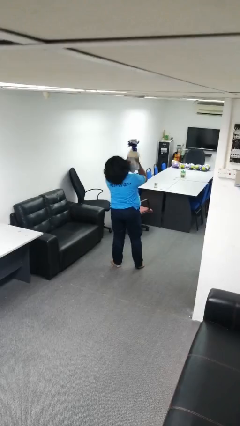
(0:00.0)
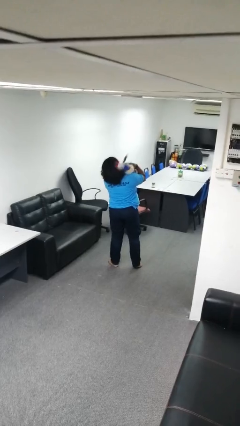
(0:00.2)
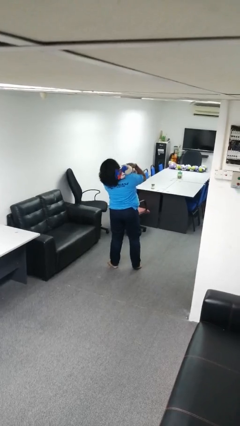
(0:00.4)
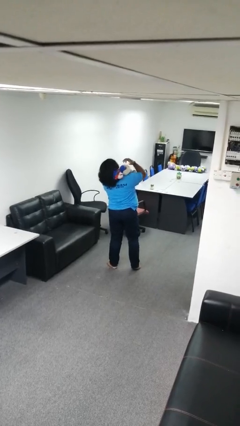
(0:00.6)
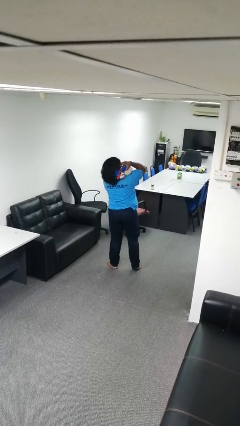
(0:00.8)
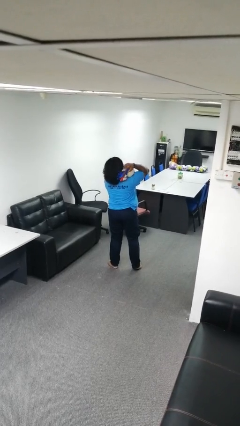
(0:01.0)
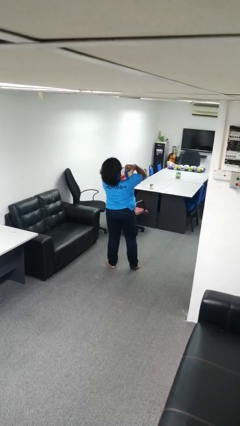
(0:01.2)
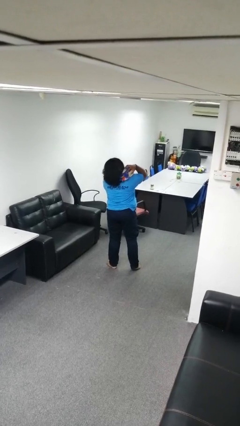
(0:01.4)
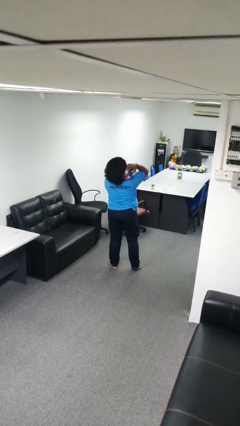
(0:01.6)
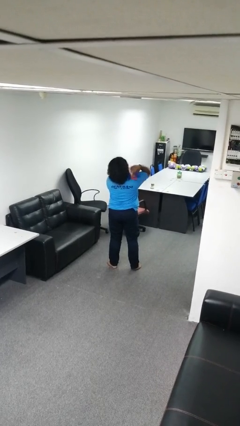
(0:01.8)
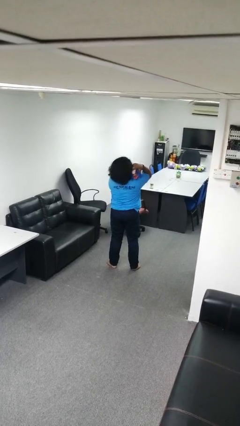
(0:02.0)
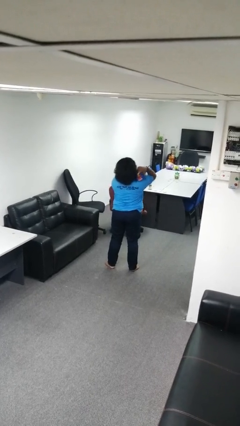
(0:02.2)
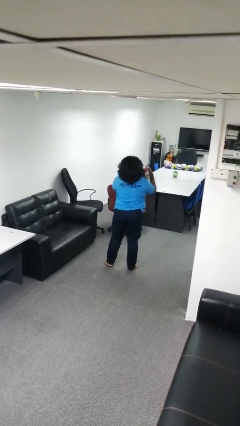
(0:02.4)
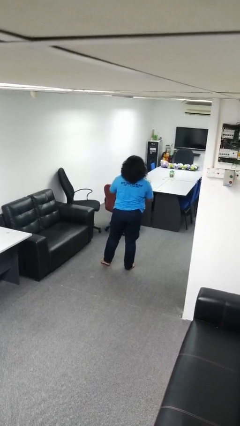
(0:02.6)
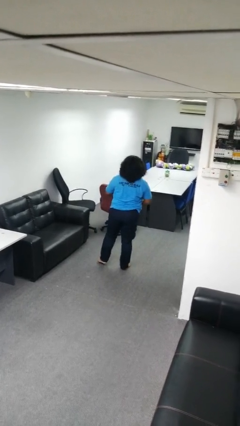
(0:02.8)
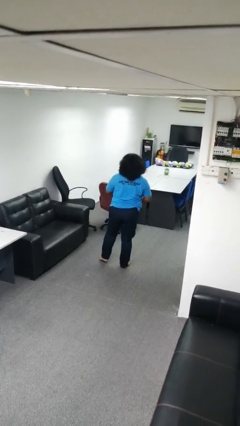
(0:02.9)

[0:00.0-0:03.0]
person hugs stuffed animal

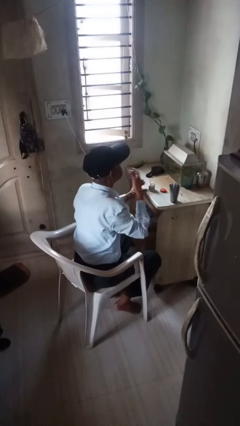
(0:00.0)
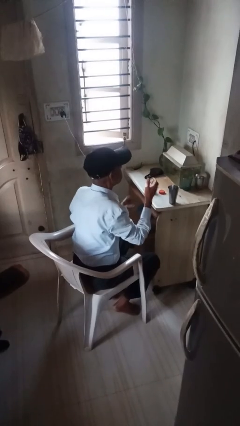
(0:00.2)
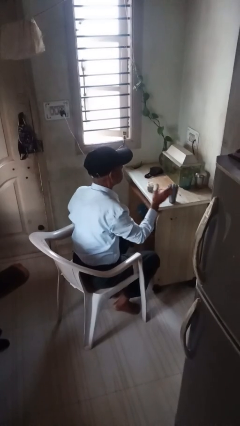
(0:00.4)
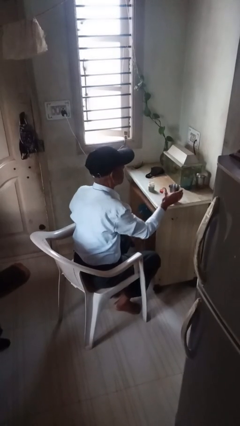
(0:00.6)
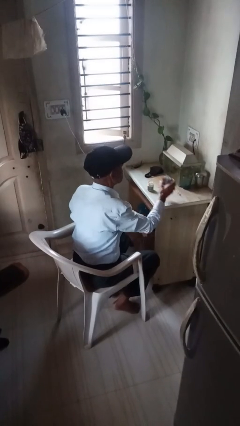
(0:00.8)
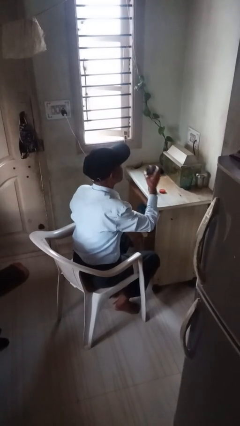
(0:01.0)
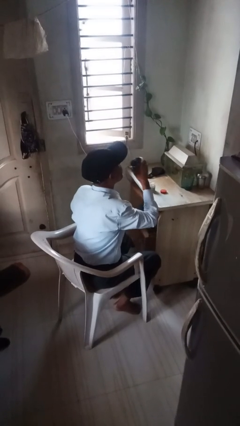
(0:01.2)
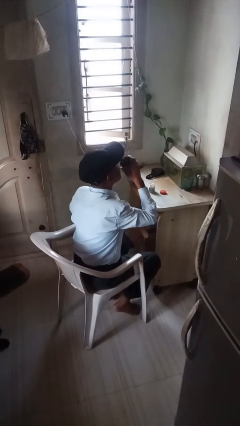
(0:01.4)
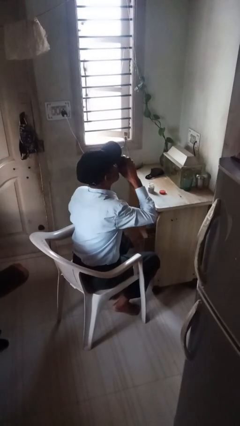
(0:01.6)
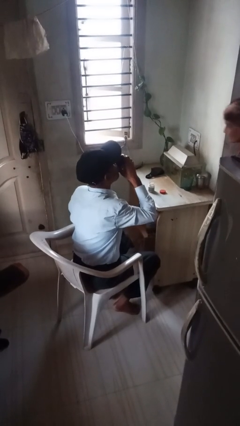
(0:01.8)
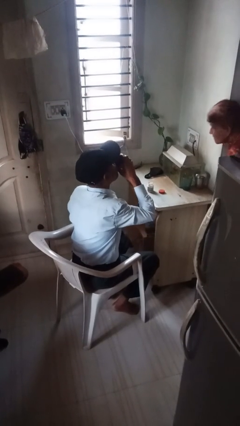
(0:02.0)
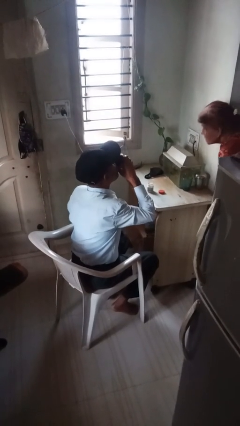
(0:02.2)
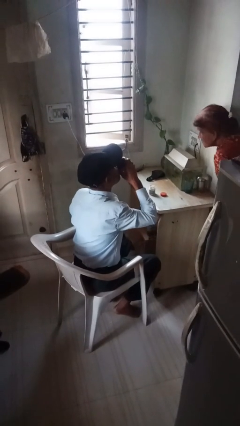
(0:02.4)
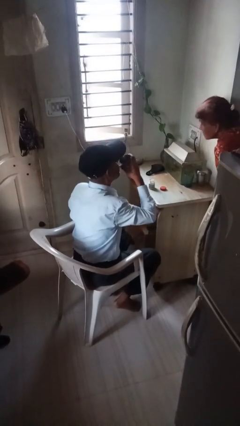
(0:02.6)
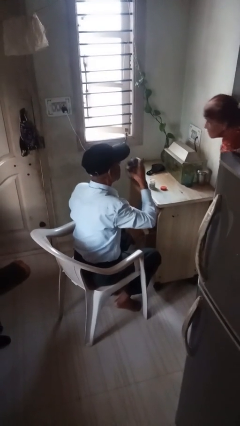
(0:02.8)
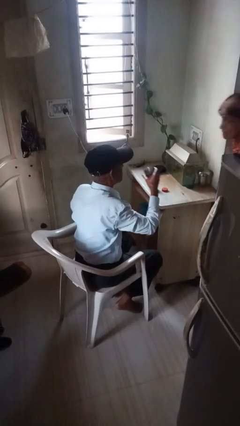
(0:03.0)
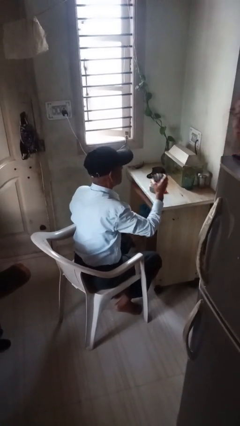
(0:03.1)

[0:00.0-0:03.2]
person drinks from cup

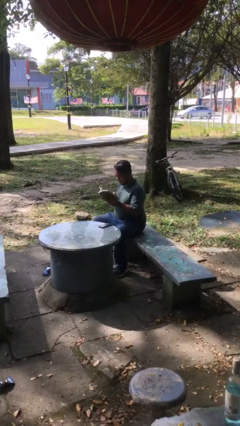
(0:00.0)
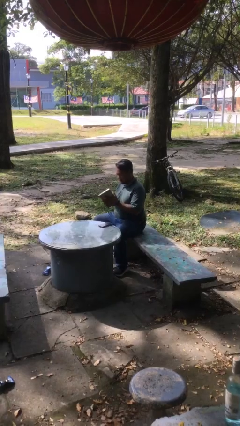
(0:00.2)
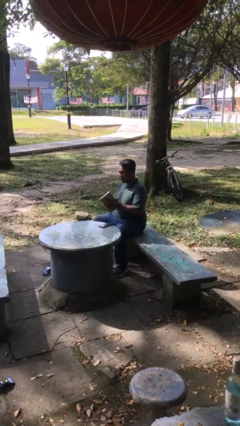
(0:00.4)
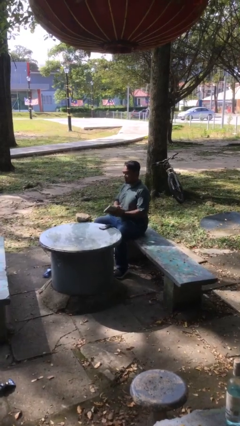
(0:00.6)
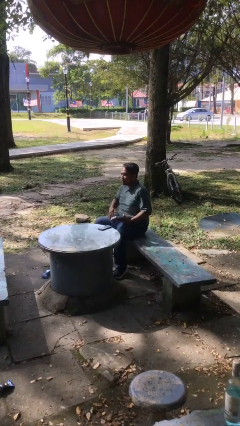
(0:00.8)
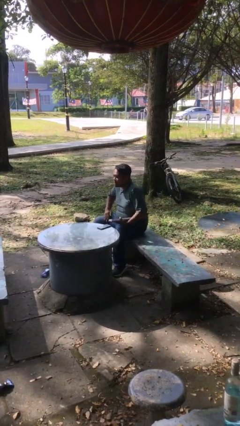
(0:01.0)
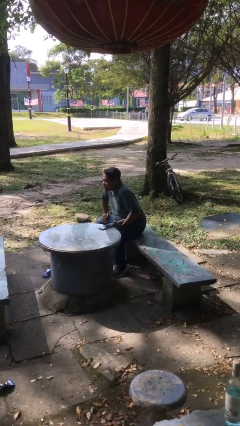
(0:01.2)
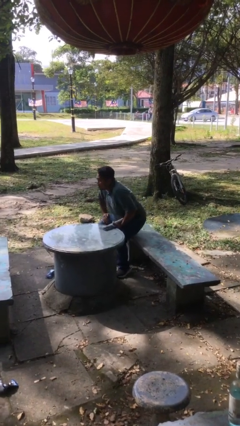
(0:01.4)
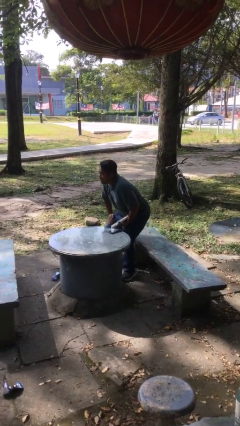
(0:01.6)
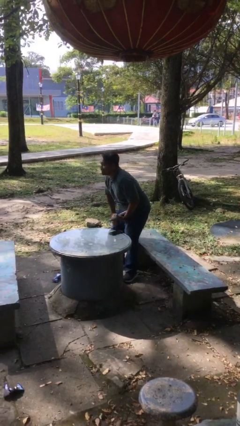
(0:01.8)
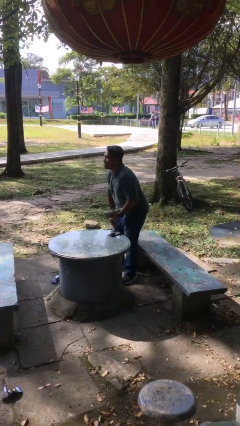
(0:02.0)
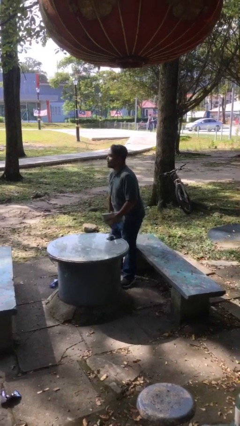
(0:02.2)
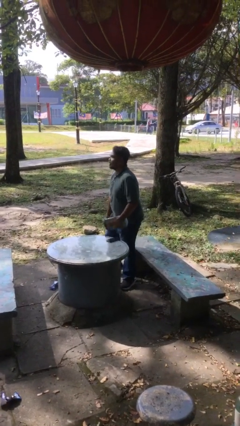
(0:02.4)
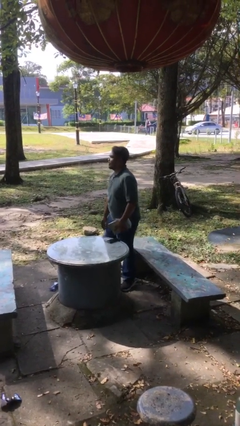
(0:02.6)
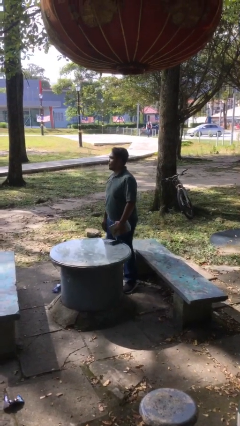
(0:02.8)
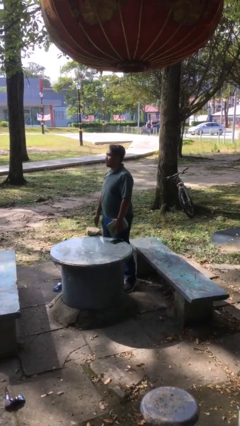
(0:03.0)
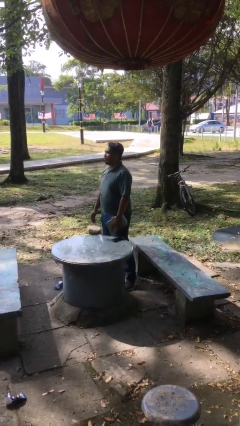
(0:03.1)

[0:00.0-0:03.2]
person stands up

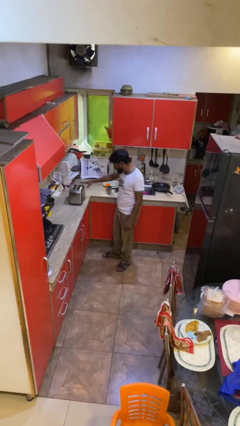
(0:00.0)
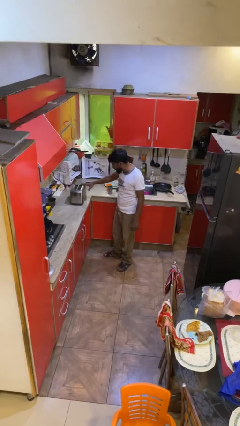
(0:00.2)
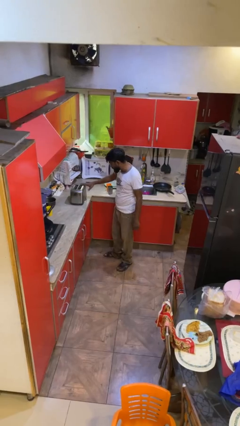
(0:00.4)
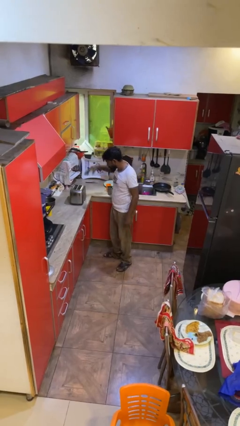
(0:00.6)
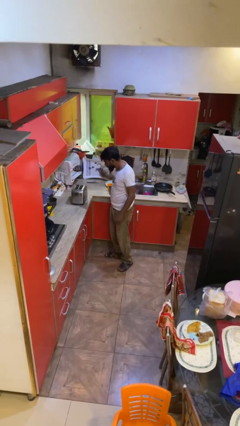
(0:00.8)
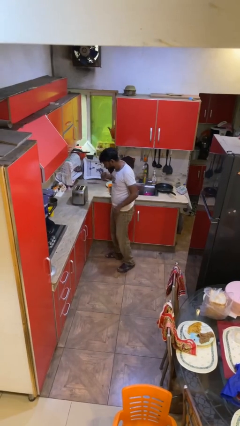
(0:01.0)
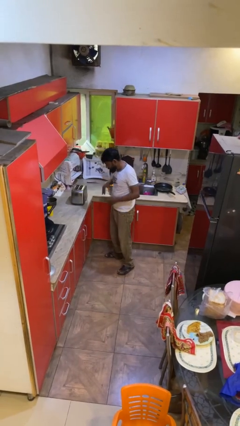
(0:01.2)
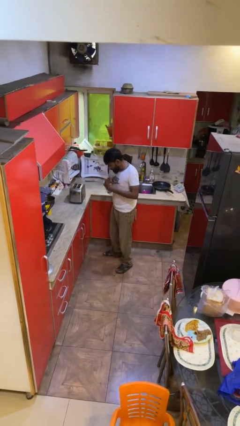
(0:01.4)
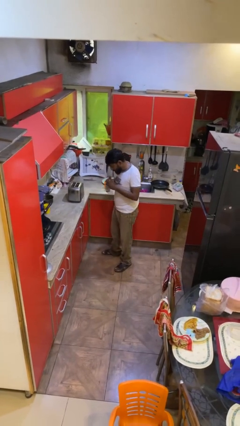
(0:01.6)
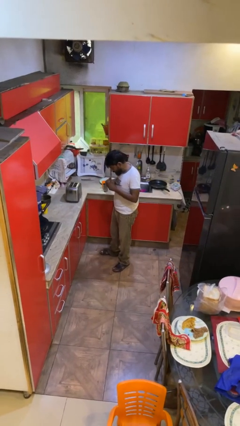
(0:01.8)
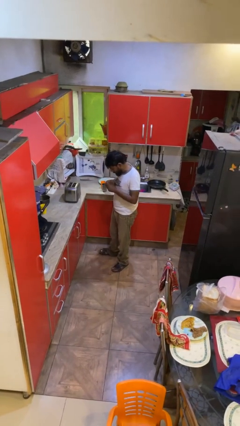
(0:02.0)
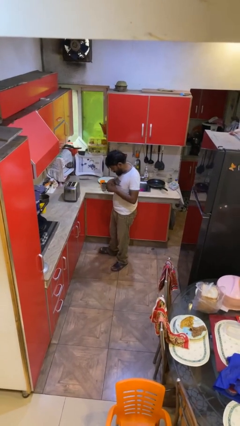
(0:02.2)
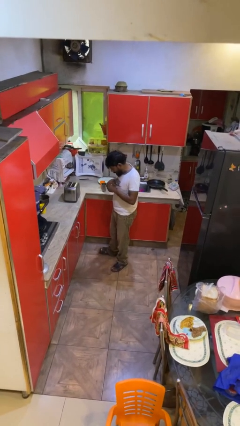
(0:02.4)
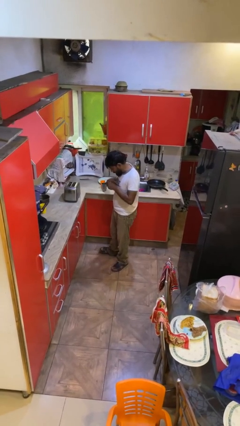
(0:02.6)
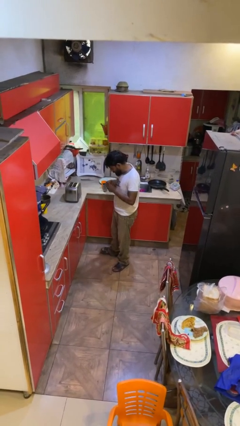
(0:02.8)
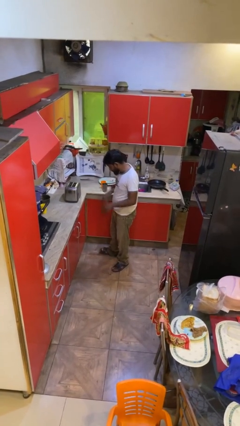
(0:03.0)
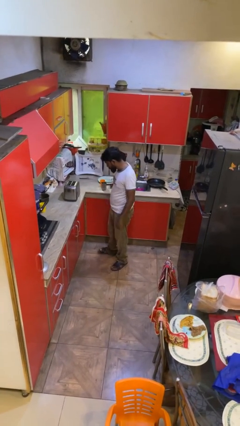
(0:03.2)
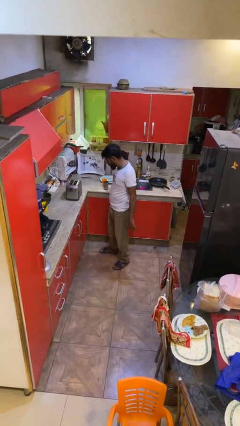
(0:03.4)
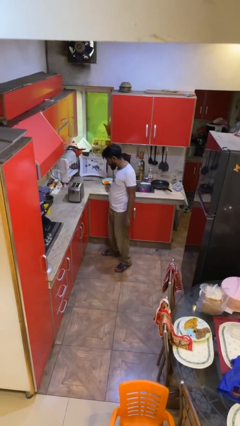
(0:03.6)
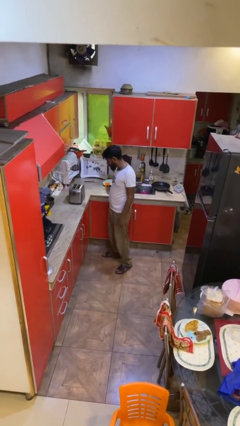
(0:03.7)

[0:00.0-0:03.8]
person burns hand

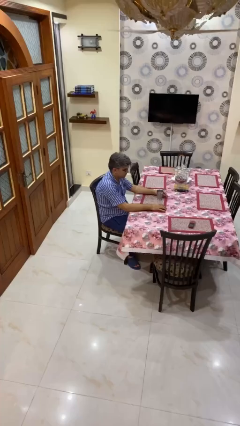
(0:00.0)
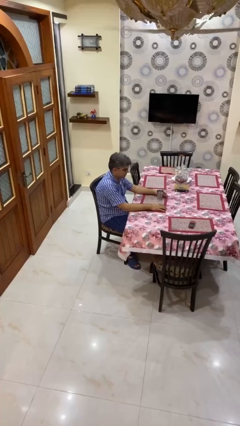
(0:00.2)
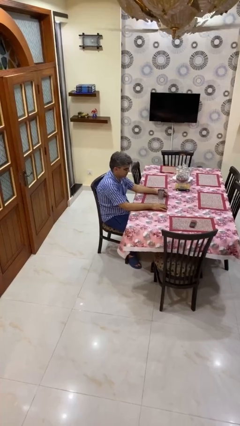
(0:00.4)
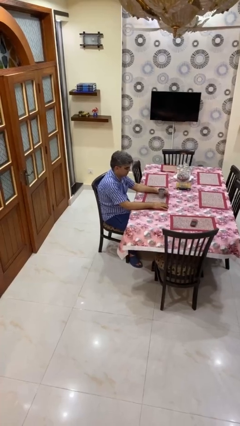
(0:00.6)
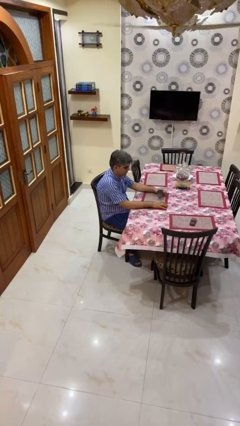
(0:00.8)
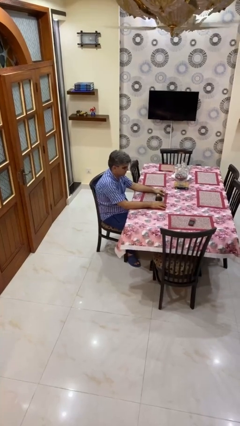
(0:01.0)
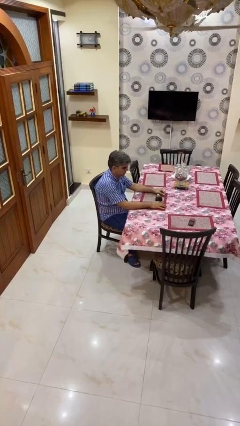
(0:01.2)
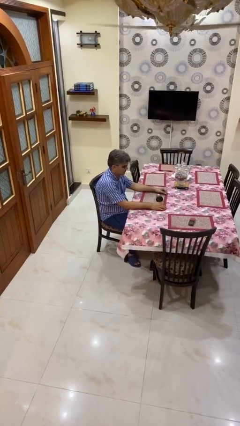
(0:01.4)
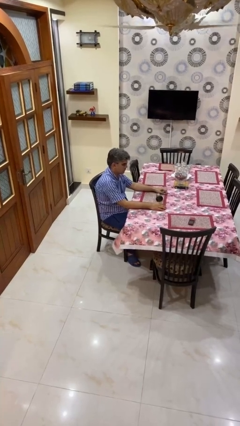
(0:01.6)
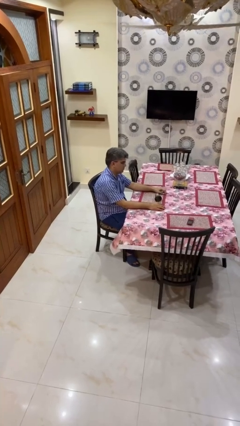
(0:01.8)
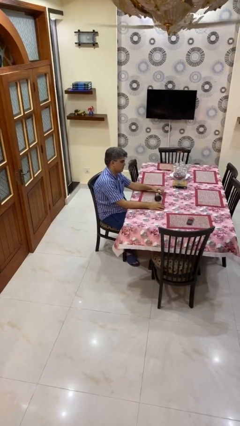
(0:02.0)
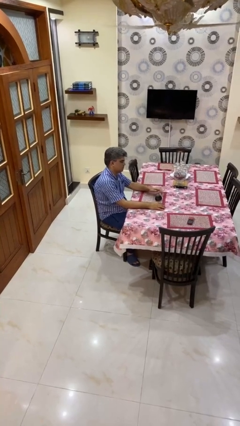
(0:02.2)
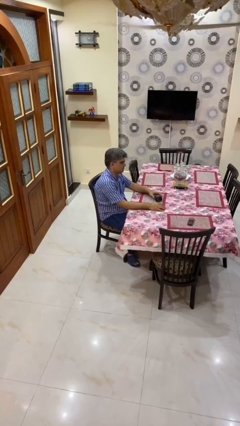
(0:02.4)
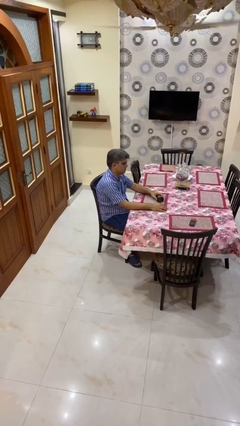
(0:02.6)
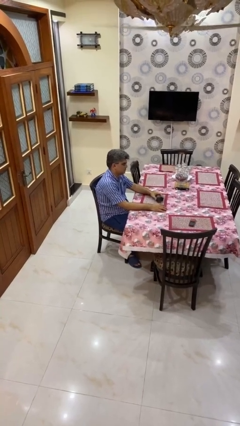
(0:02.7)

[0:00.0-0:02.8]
person knocks over glass

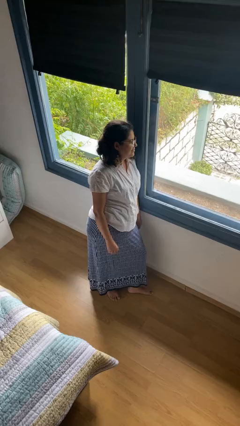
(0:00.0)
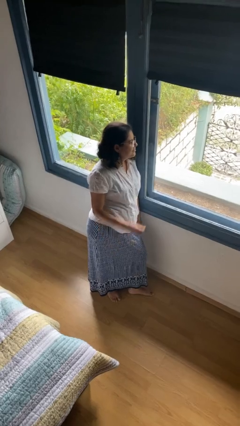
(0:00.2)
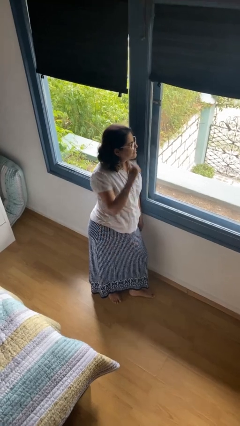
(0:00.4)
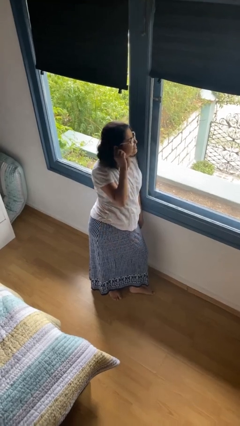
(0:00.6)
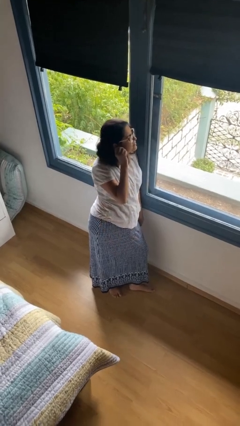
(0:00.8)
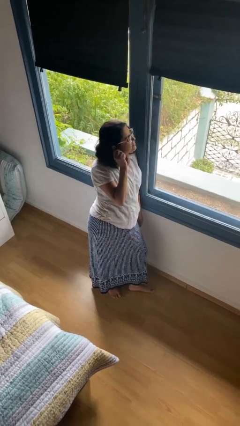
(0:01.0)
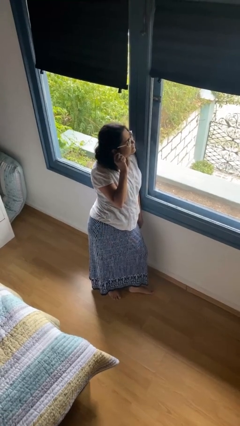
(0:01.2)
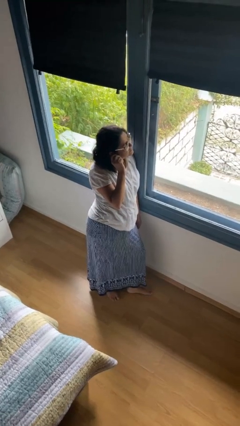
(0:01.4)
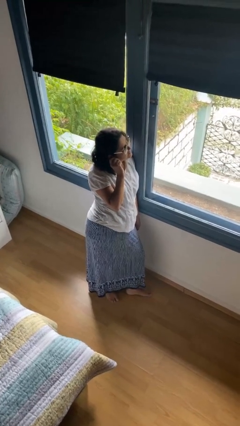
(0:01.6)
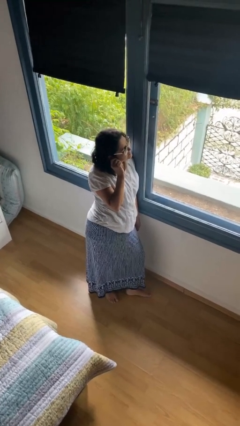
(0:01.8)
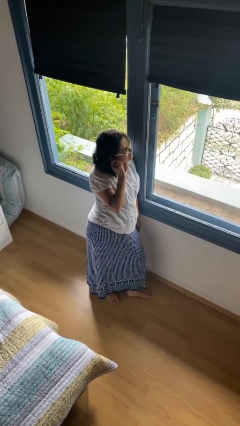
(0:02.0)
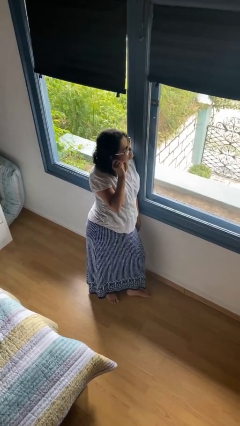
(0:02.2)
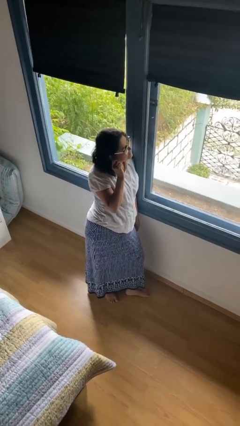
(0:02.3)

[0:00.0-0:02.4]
person touches earlobe
